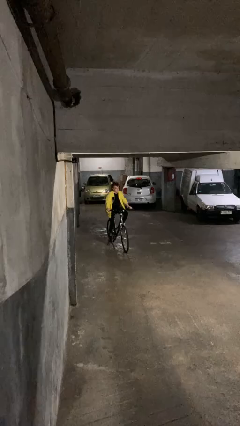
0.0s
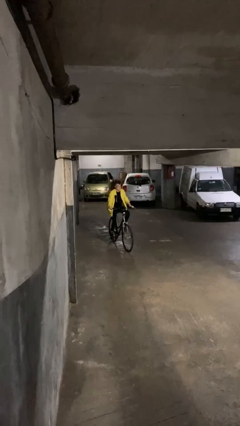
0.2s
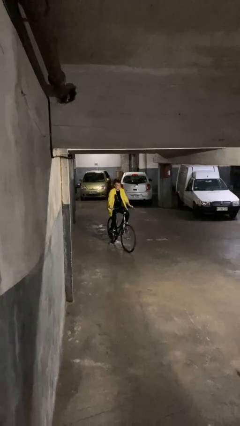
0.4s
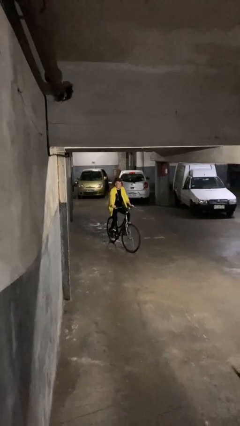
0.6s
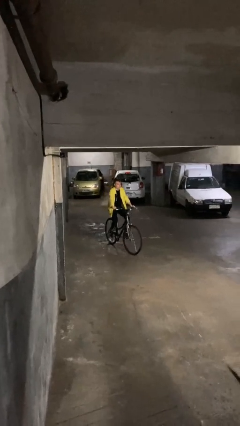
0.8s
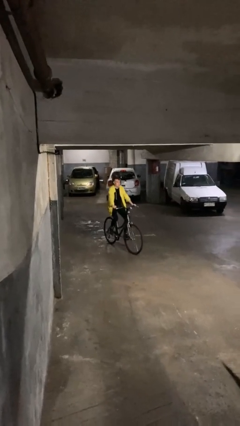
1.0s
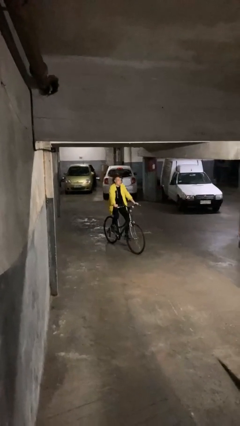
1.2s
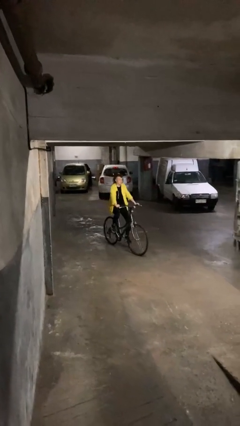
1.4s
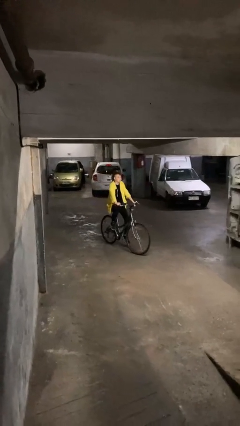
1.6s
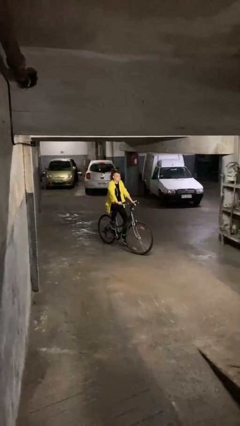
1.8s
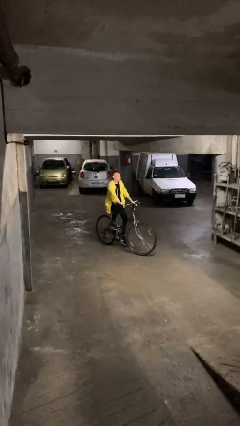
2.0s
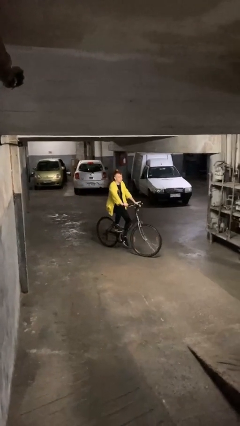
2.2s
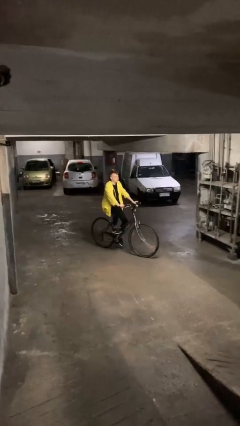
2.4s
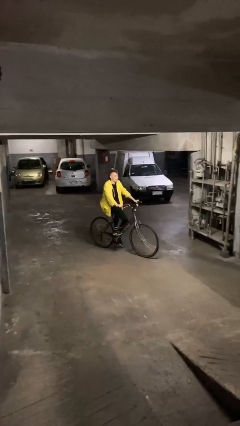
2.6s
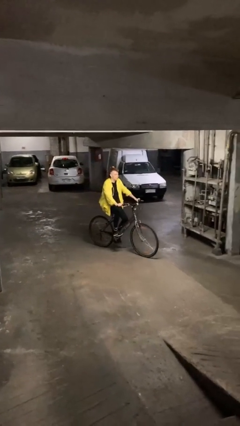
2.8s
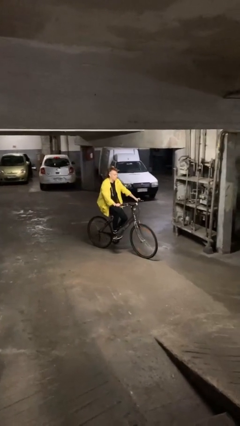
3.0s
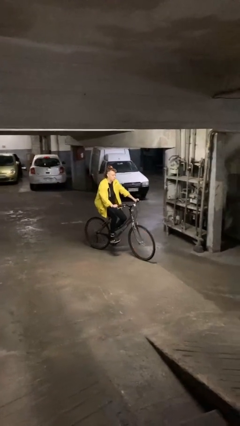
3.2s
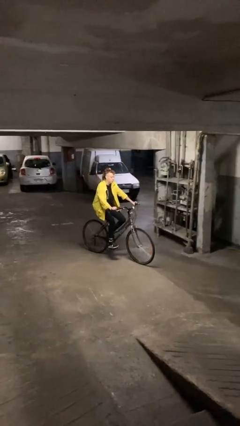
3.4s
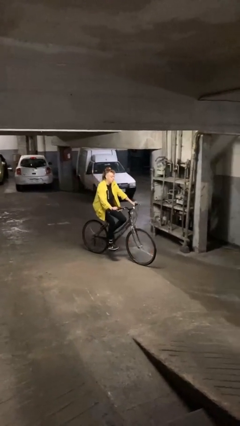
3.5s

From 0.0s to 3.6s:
person rides bicycle

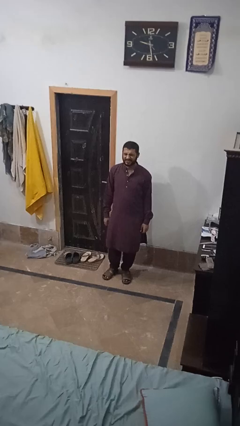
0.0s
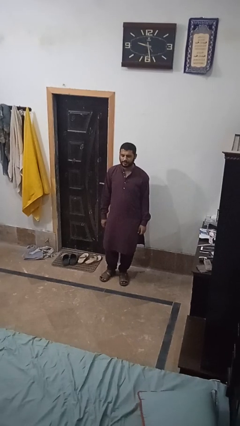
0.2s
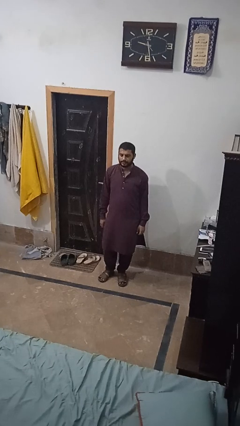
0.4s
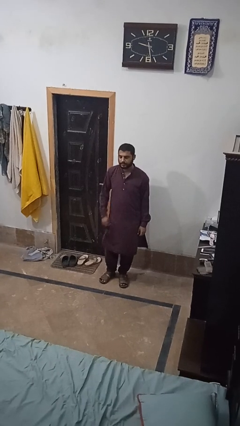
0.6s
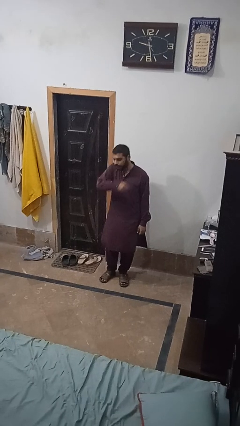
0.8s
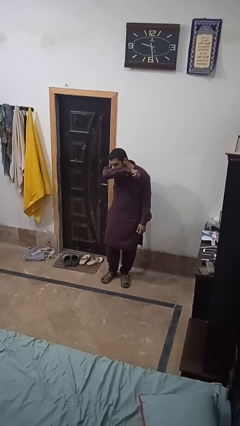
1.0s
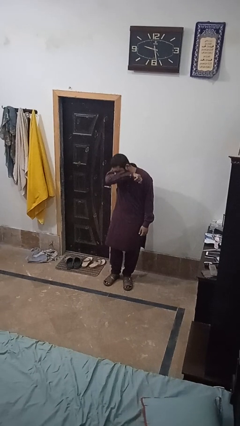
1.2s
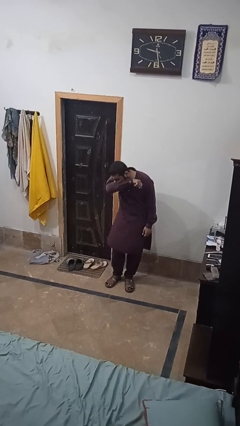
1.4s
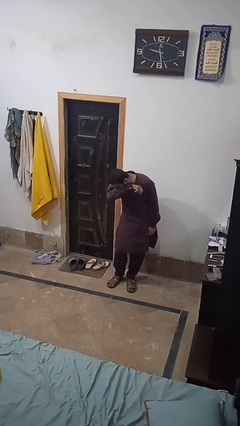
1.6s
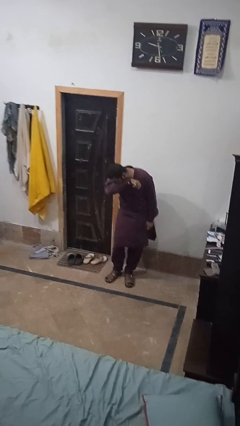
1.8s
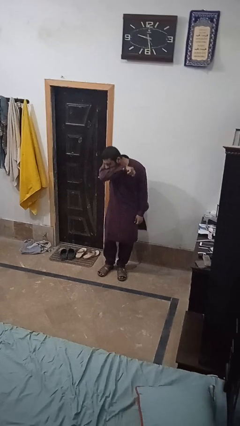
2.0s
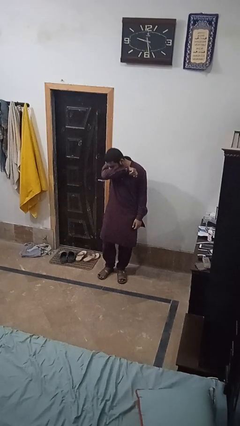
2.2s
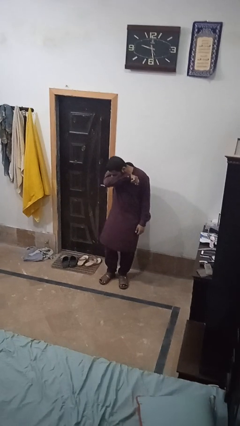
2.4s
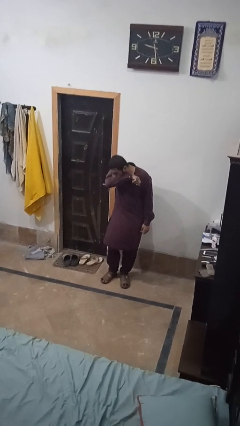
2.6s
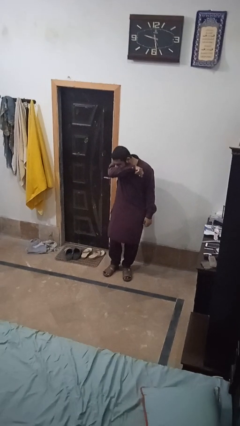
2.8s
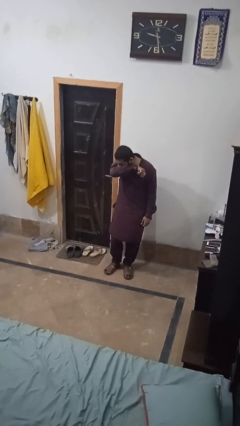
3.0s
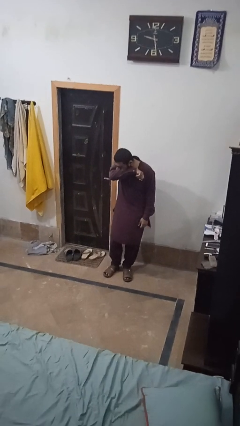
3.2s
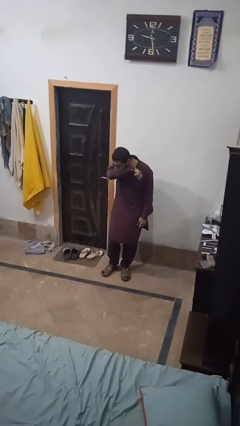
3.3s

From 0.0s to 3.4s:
person sneezes into arm

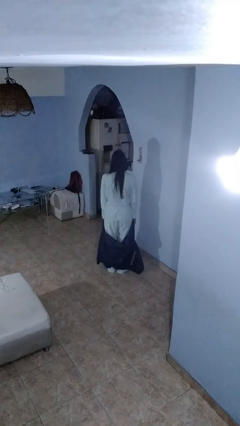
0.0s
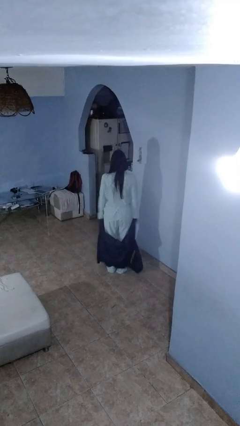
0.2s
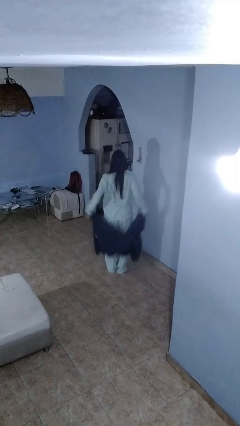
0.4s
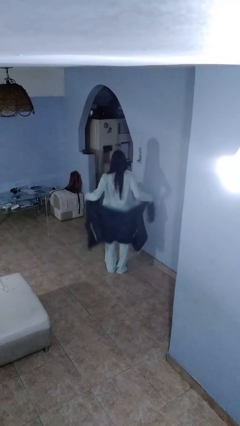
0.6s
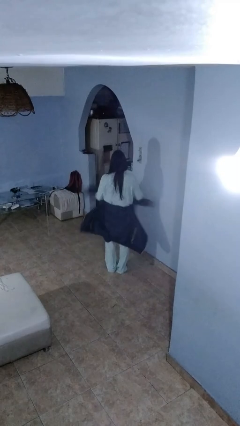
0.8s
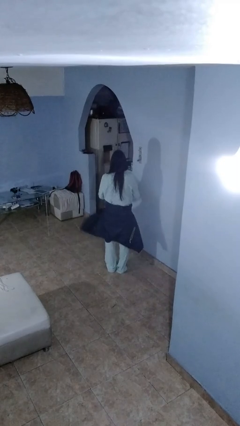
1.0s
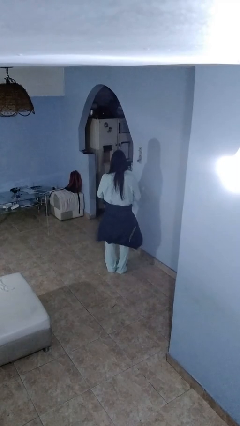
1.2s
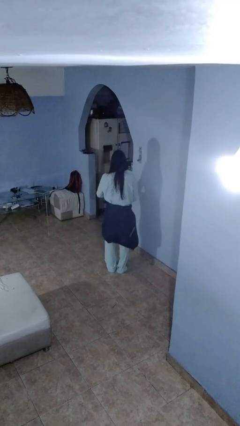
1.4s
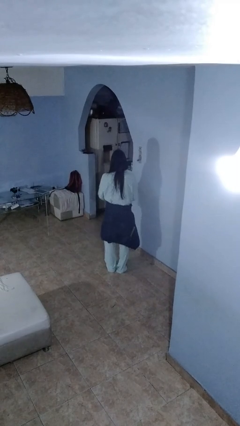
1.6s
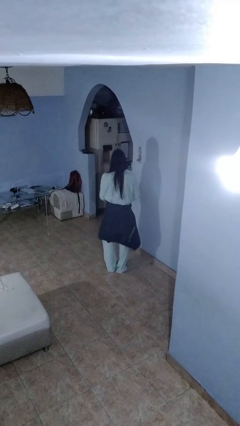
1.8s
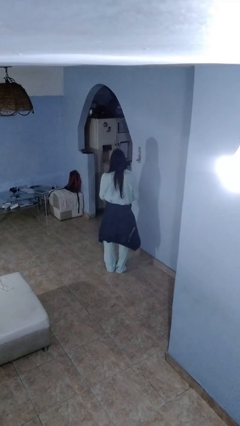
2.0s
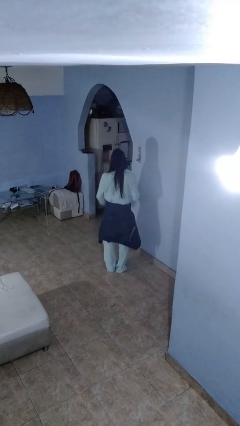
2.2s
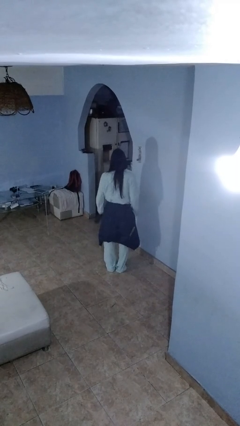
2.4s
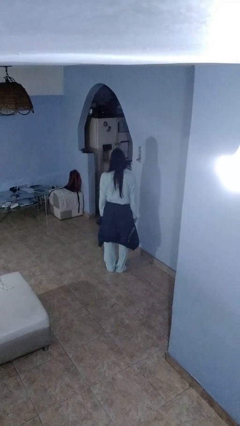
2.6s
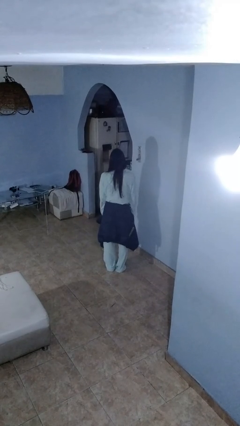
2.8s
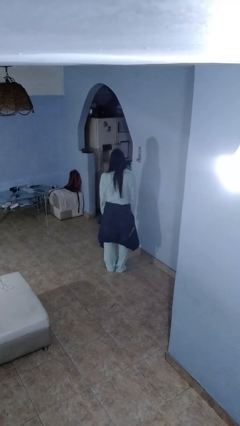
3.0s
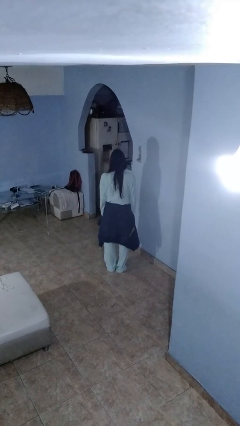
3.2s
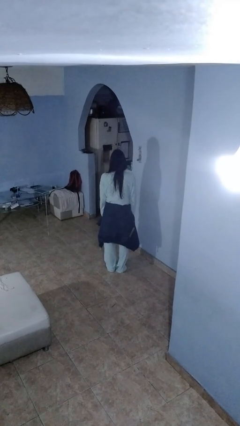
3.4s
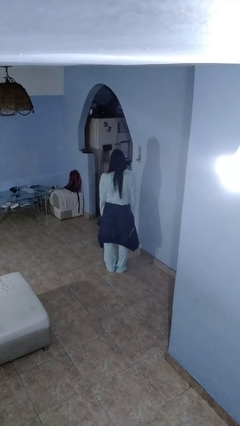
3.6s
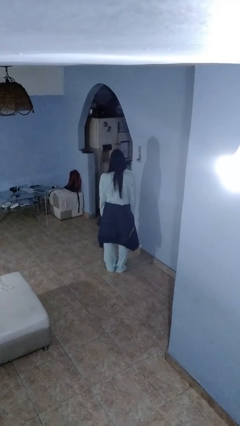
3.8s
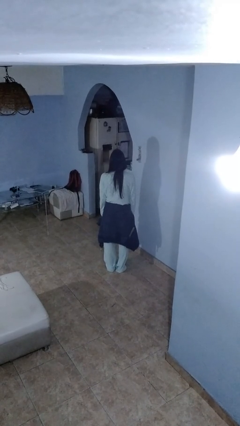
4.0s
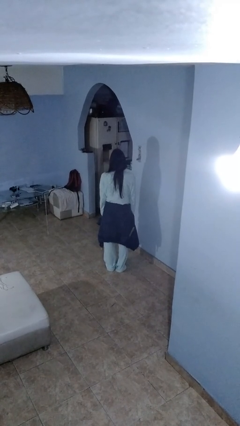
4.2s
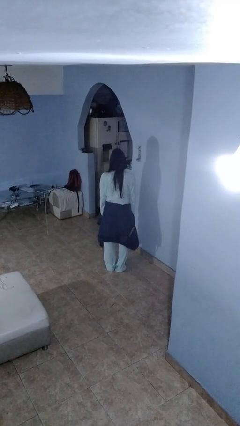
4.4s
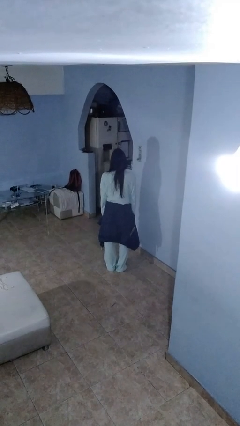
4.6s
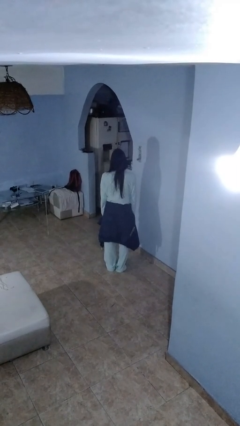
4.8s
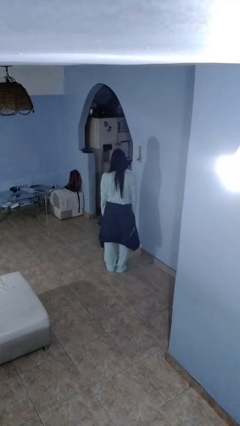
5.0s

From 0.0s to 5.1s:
person ties jacket around waist

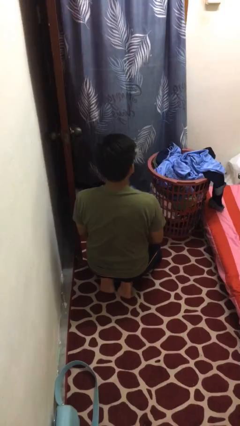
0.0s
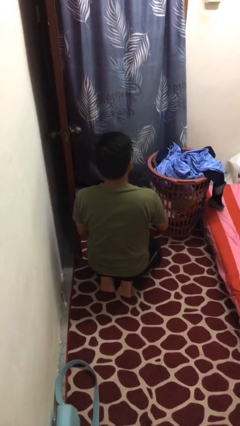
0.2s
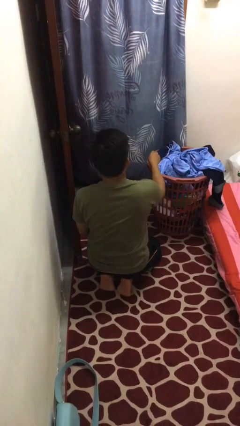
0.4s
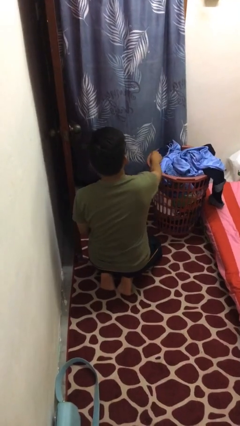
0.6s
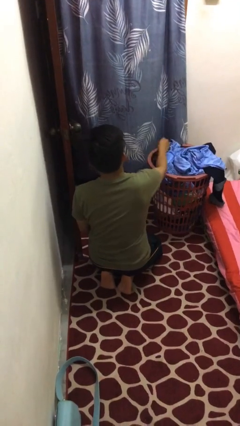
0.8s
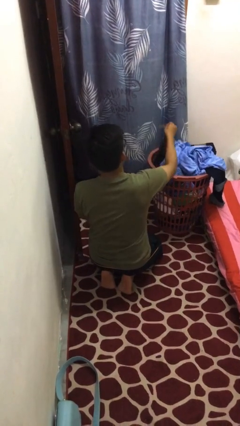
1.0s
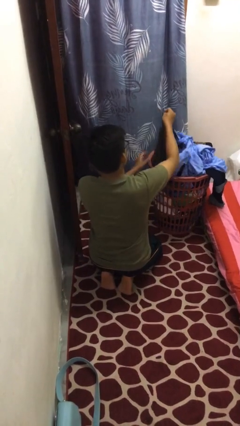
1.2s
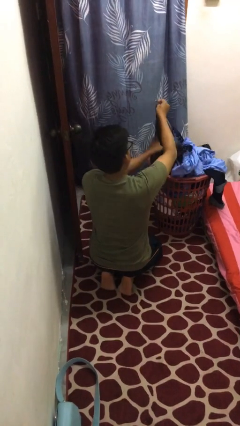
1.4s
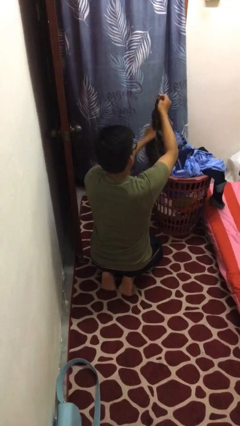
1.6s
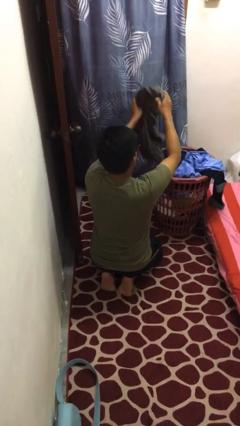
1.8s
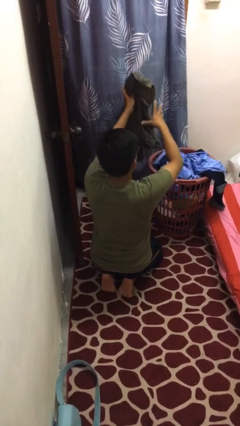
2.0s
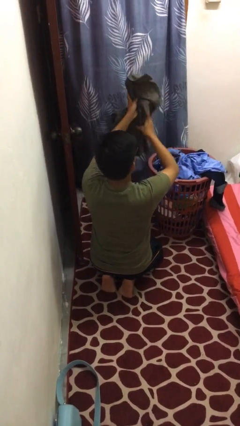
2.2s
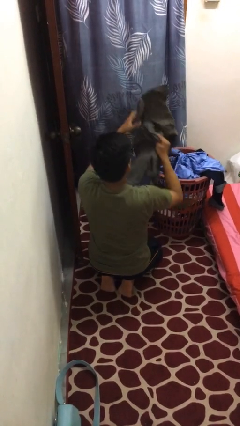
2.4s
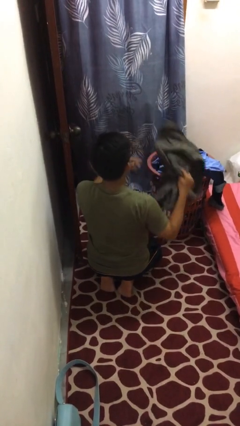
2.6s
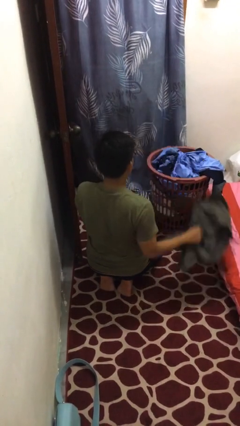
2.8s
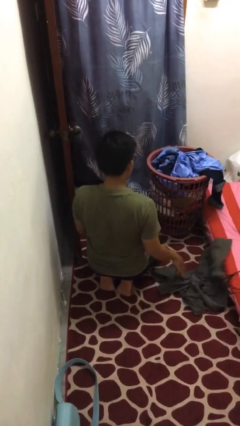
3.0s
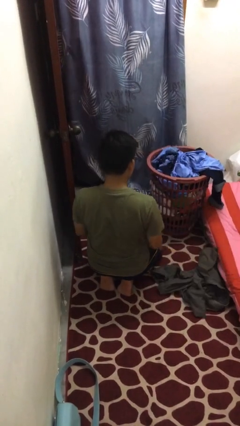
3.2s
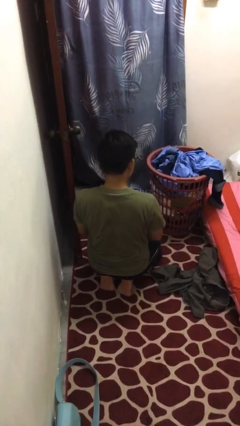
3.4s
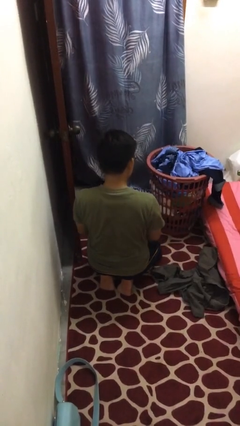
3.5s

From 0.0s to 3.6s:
person takes object from basket

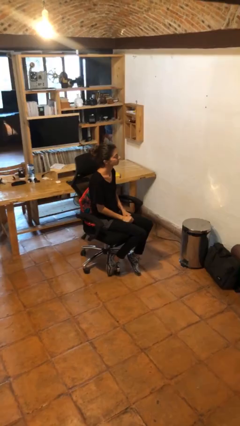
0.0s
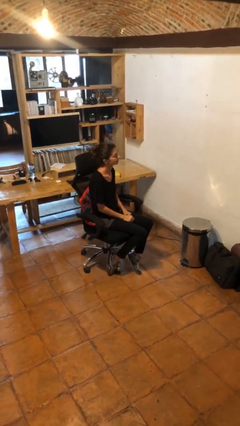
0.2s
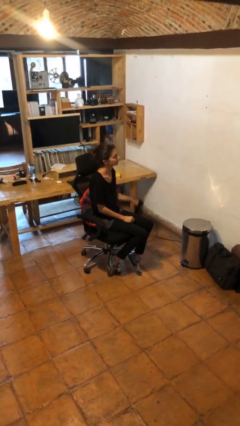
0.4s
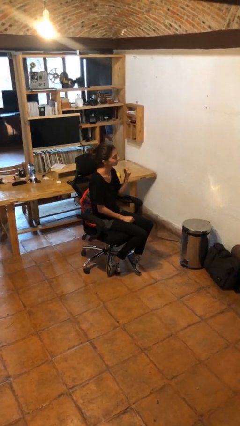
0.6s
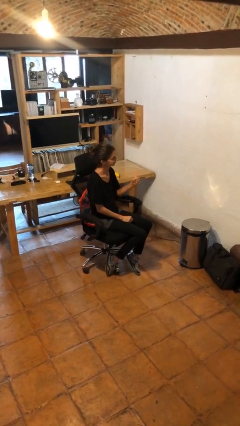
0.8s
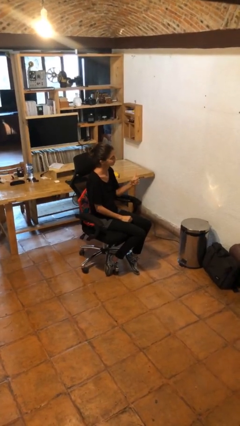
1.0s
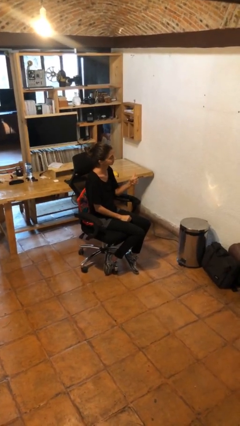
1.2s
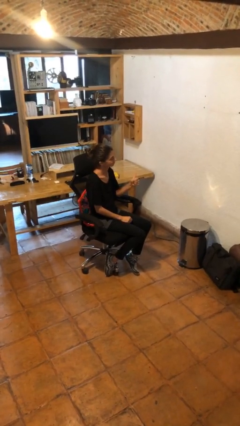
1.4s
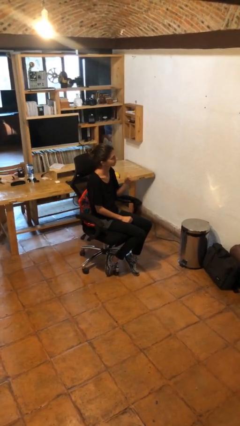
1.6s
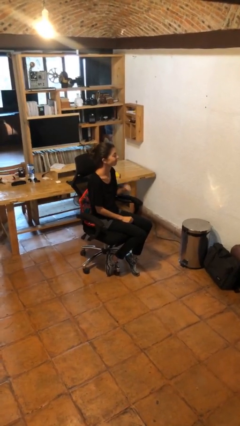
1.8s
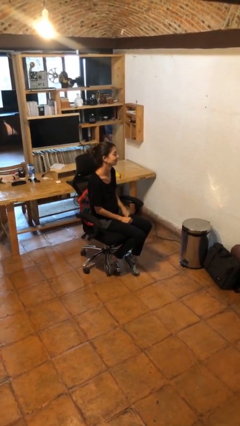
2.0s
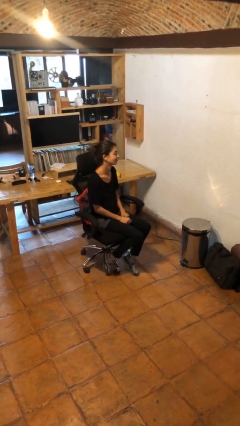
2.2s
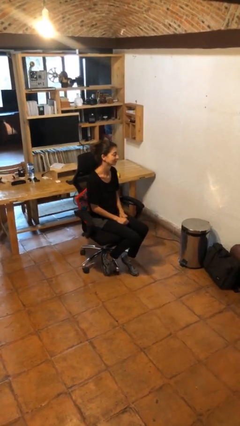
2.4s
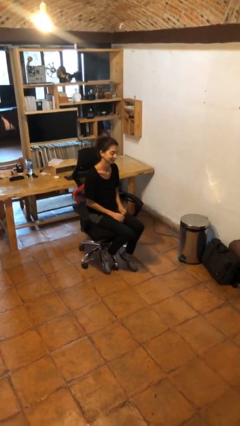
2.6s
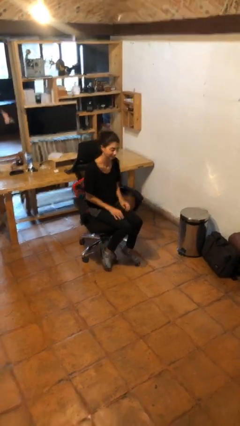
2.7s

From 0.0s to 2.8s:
person gestures thumbs up
